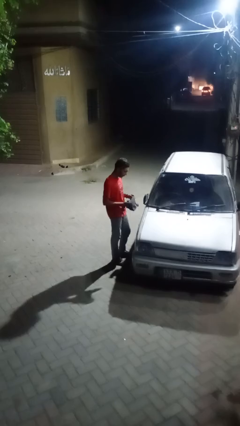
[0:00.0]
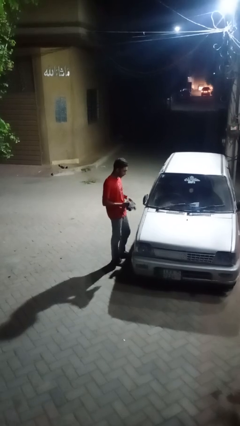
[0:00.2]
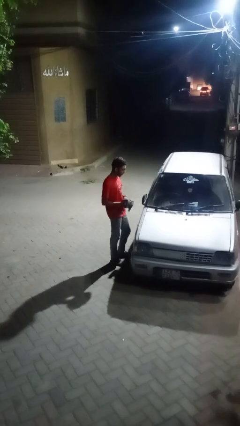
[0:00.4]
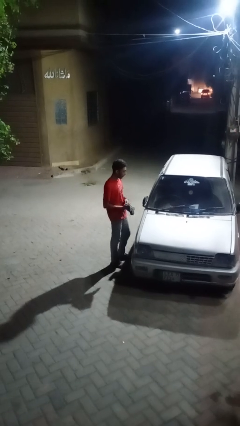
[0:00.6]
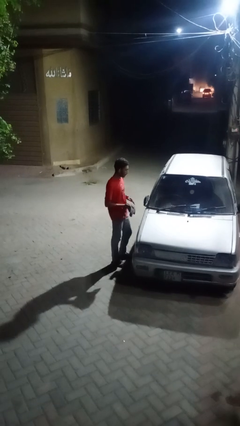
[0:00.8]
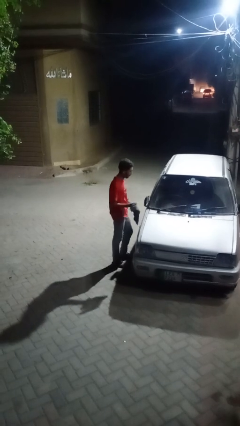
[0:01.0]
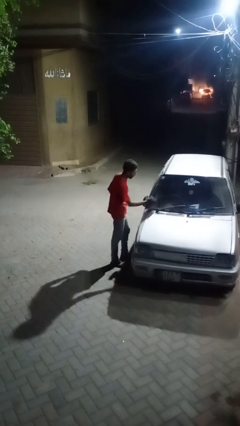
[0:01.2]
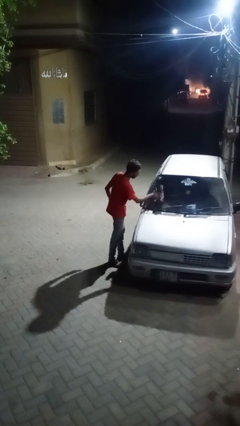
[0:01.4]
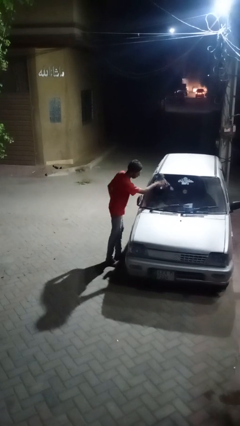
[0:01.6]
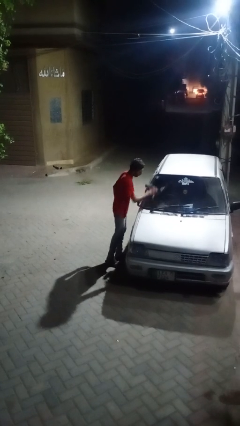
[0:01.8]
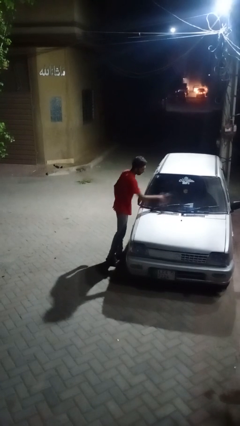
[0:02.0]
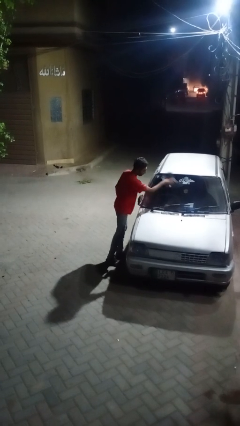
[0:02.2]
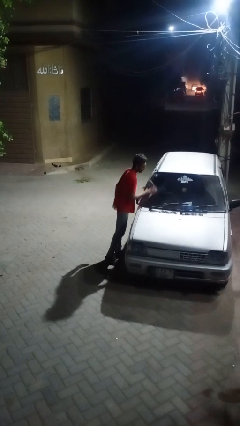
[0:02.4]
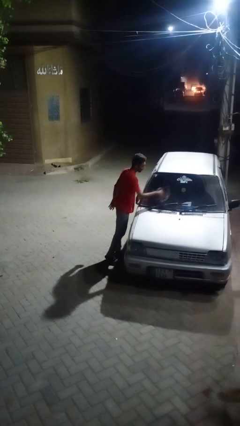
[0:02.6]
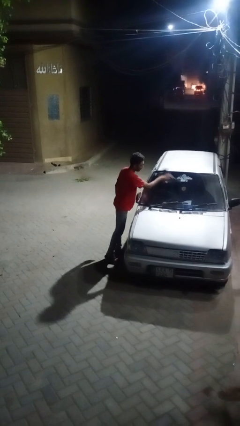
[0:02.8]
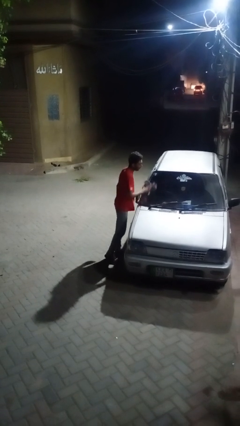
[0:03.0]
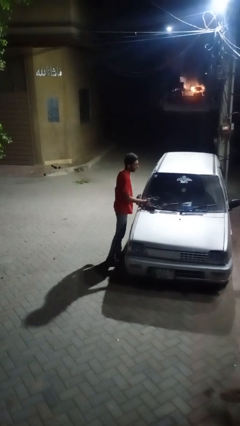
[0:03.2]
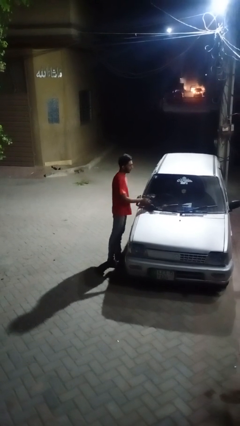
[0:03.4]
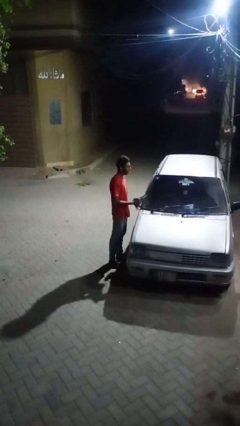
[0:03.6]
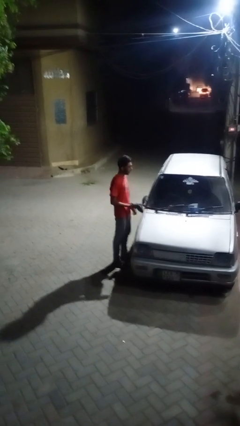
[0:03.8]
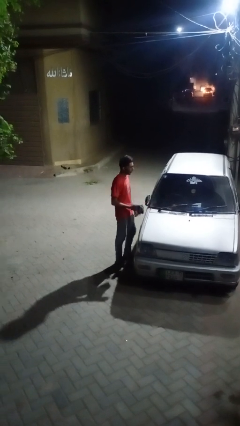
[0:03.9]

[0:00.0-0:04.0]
person polishes car with rag

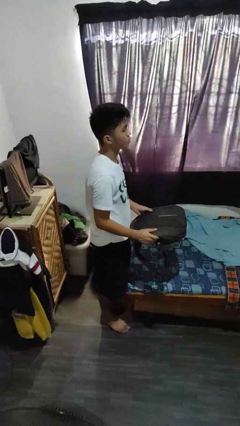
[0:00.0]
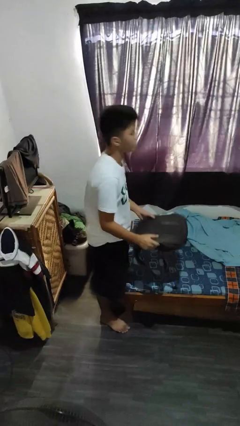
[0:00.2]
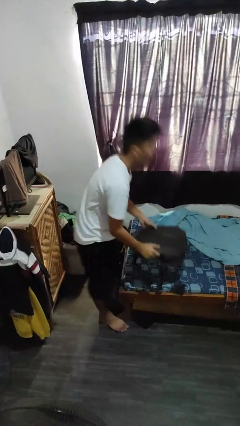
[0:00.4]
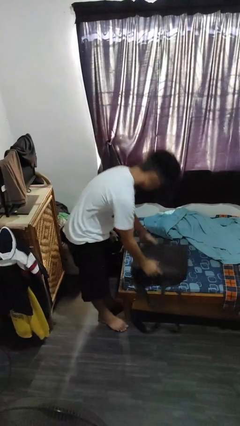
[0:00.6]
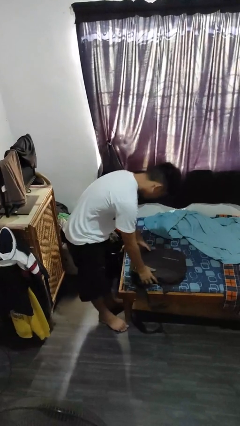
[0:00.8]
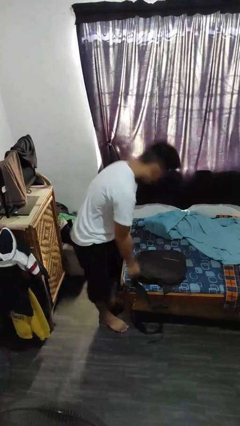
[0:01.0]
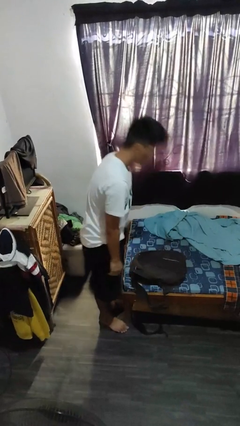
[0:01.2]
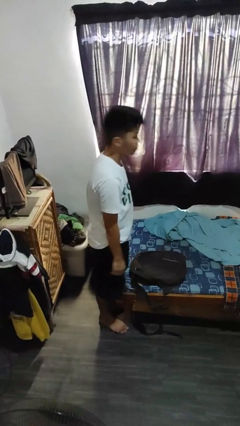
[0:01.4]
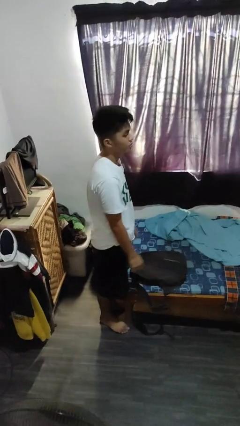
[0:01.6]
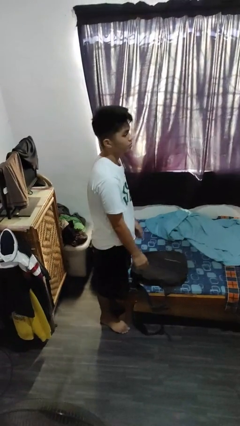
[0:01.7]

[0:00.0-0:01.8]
person puts down object on bed

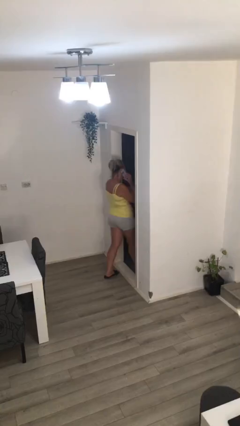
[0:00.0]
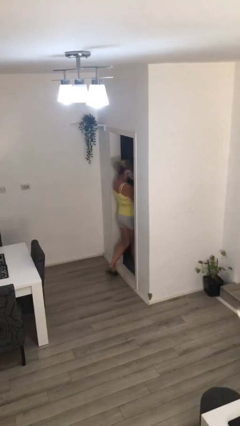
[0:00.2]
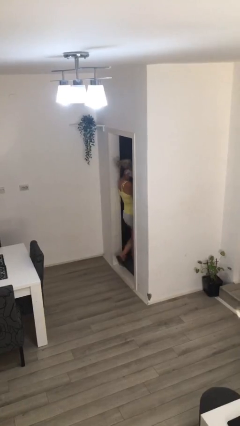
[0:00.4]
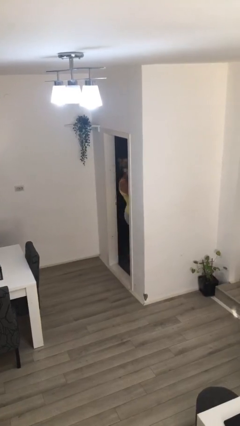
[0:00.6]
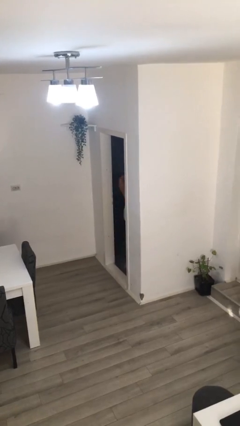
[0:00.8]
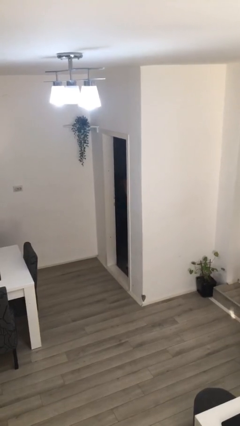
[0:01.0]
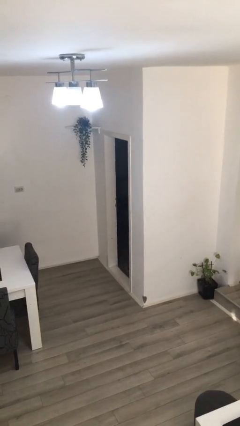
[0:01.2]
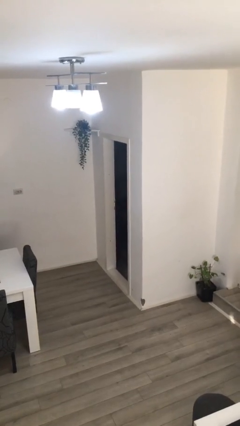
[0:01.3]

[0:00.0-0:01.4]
person exits scene through structure

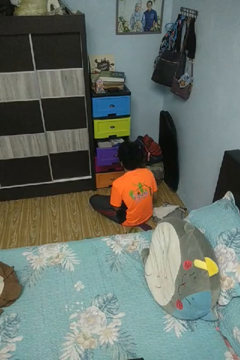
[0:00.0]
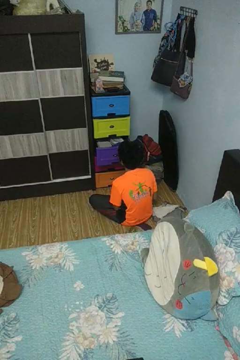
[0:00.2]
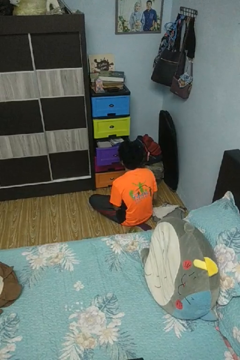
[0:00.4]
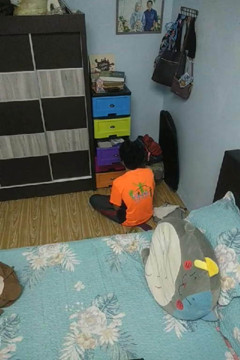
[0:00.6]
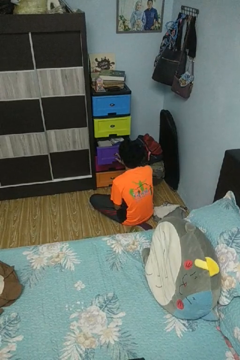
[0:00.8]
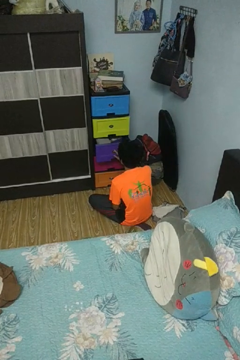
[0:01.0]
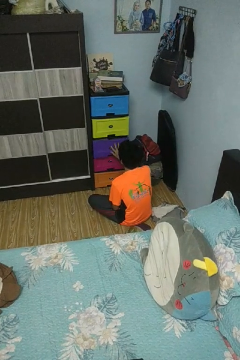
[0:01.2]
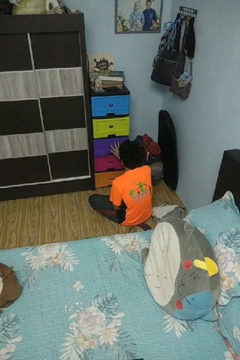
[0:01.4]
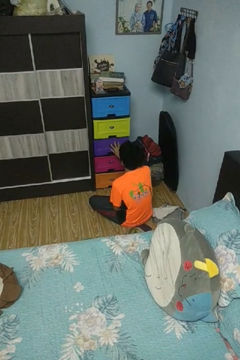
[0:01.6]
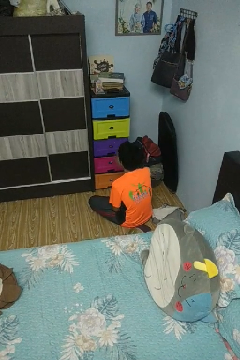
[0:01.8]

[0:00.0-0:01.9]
person closes dresser drawer

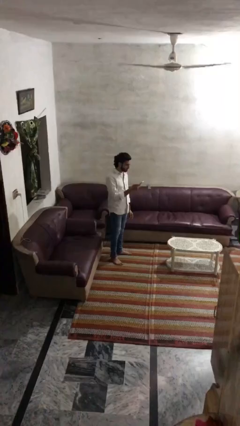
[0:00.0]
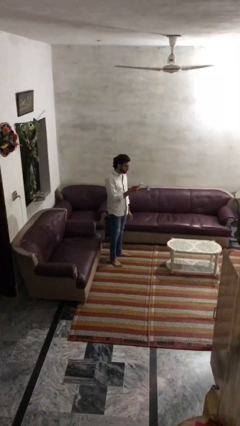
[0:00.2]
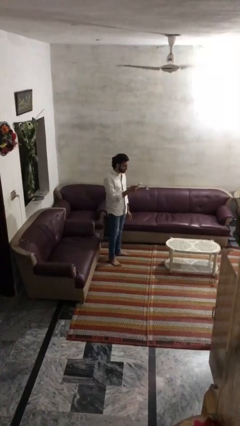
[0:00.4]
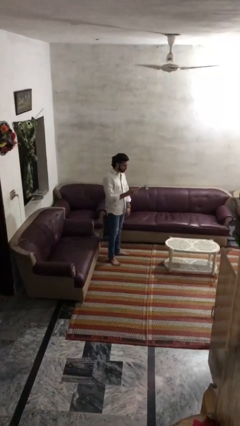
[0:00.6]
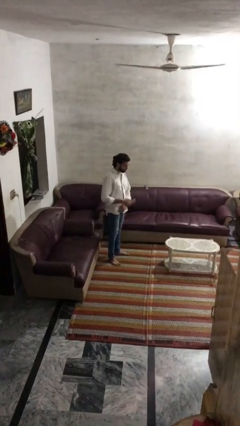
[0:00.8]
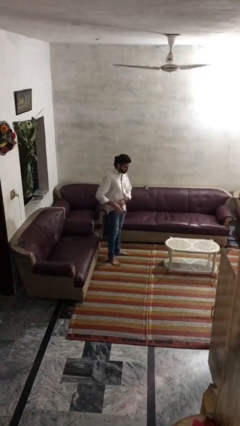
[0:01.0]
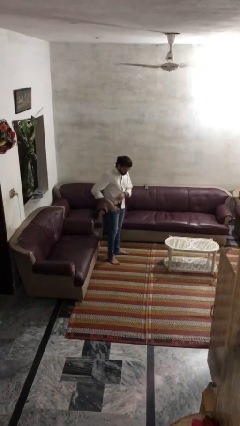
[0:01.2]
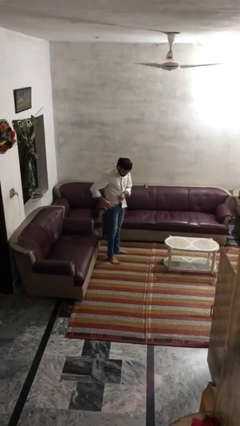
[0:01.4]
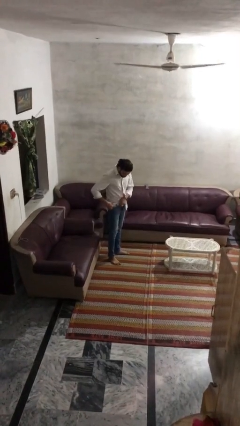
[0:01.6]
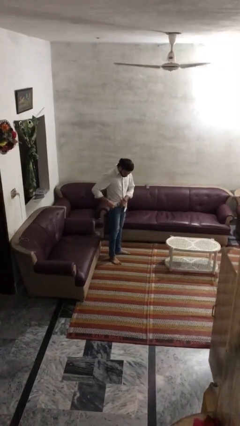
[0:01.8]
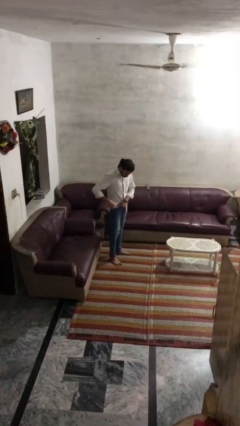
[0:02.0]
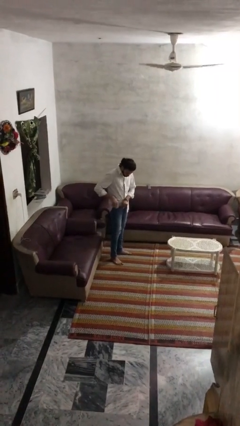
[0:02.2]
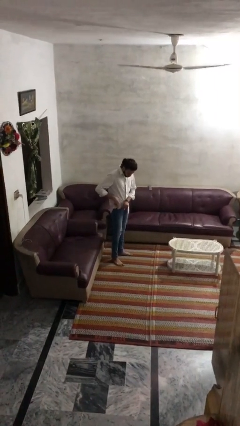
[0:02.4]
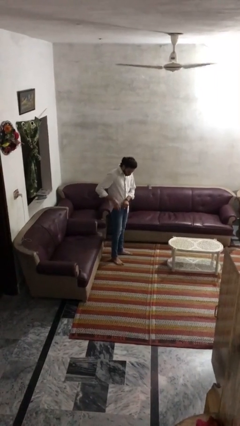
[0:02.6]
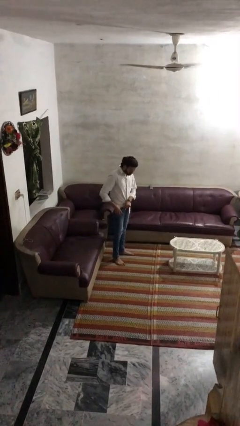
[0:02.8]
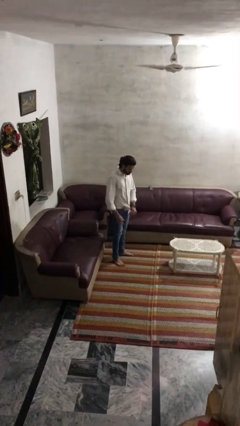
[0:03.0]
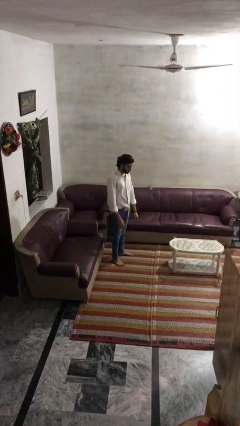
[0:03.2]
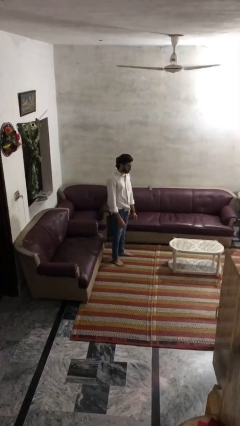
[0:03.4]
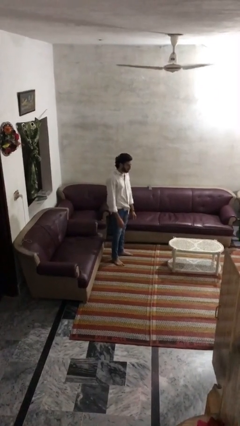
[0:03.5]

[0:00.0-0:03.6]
person puts phone into pocket

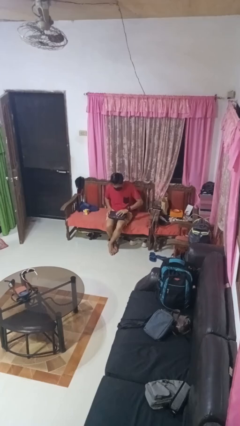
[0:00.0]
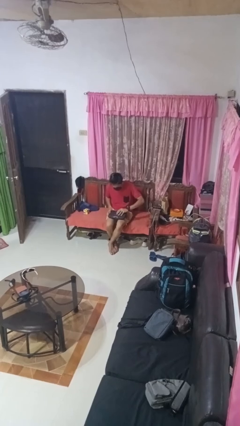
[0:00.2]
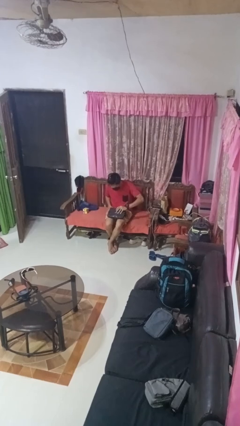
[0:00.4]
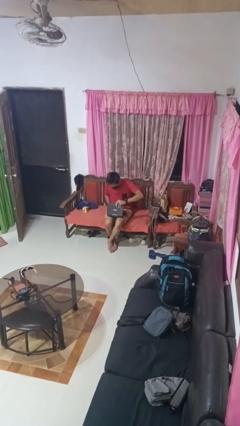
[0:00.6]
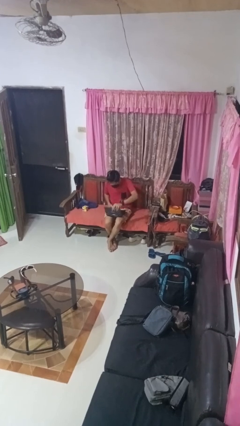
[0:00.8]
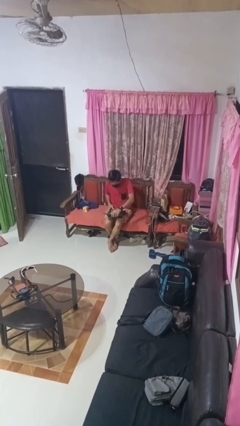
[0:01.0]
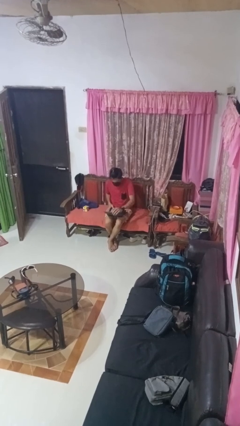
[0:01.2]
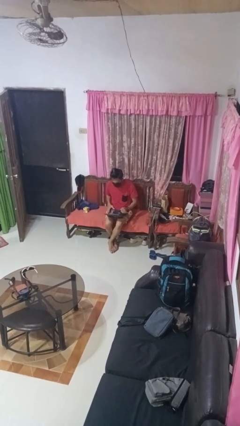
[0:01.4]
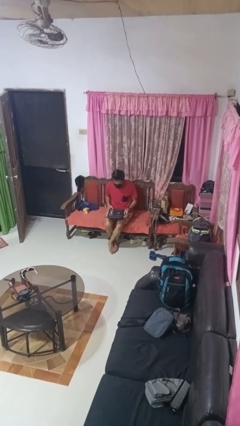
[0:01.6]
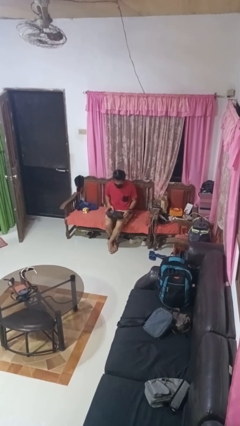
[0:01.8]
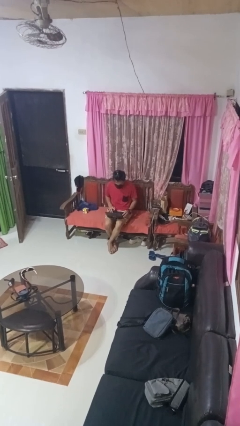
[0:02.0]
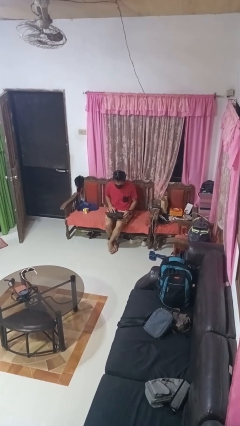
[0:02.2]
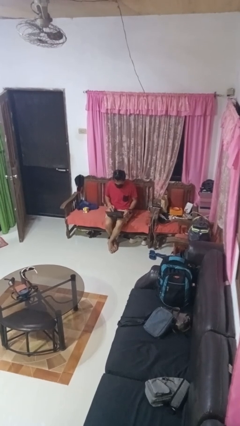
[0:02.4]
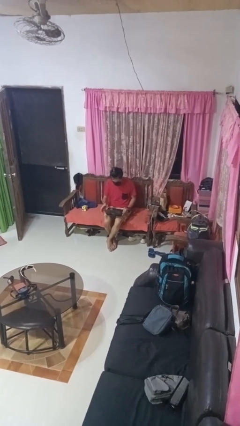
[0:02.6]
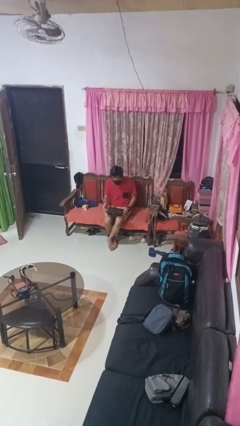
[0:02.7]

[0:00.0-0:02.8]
person opens laptop

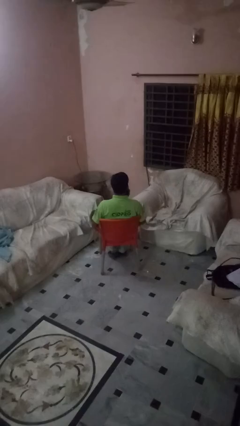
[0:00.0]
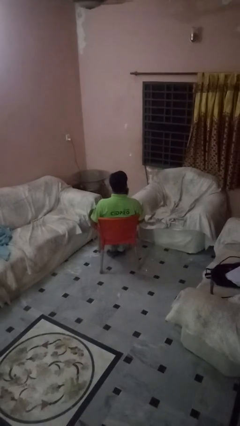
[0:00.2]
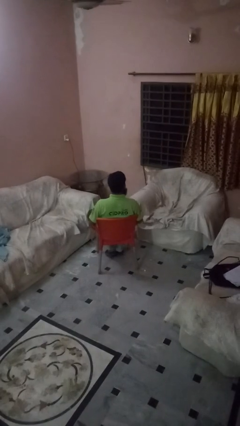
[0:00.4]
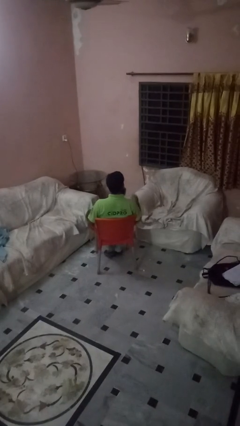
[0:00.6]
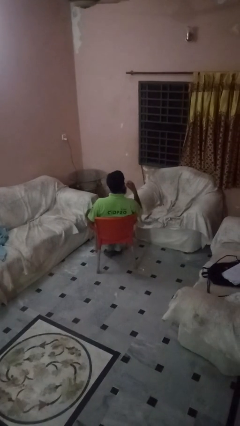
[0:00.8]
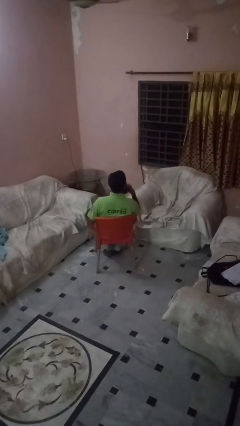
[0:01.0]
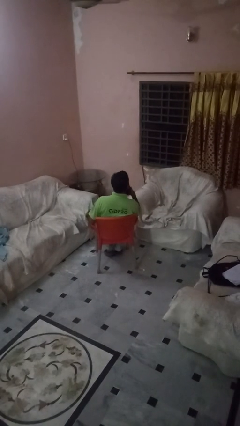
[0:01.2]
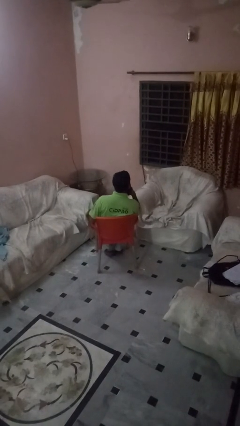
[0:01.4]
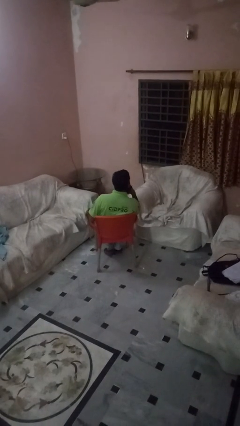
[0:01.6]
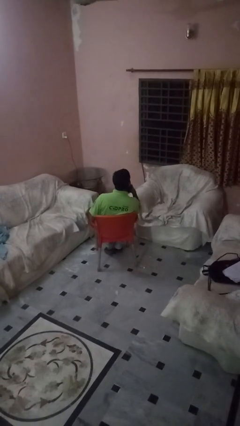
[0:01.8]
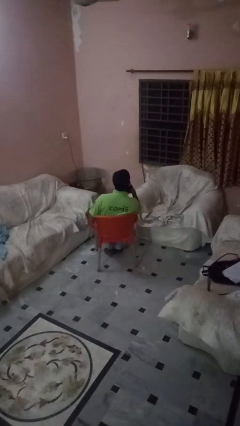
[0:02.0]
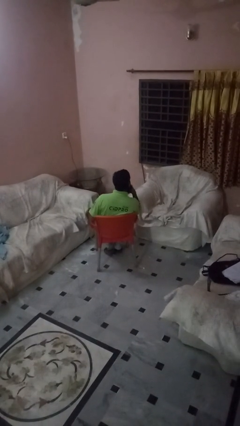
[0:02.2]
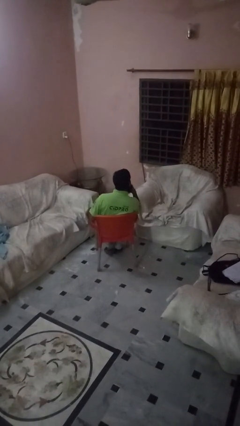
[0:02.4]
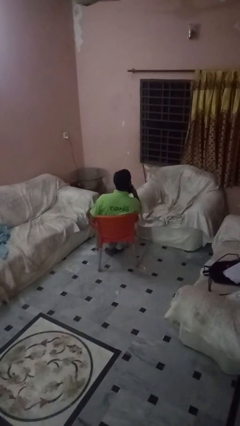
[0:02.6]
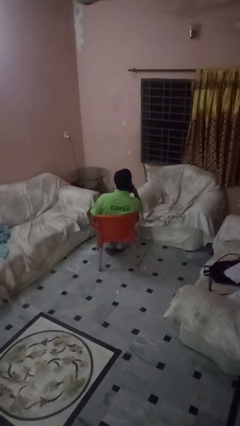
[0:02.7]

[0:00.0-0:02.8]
person strokes chin
